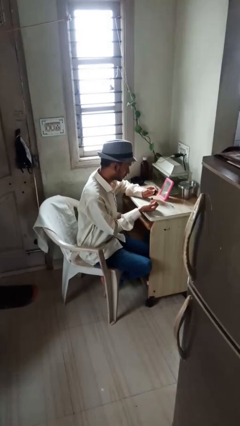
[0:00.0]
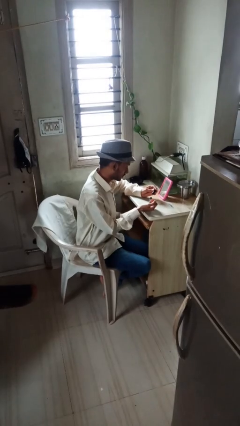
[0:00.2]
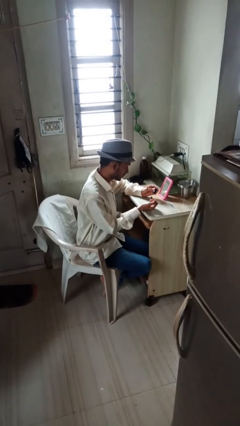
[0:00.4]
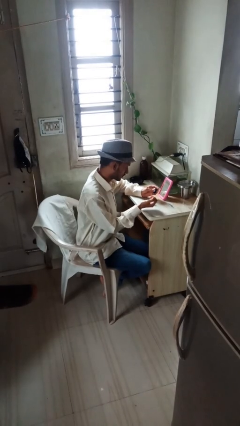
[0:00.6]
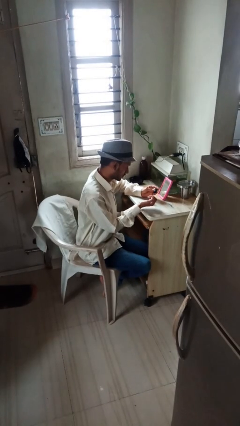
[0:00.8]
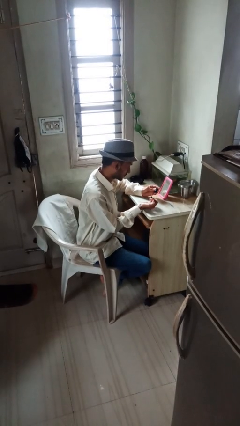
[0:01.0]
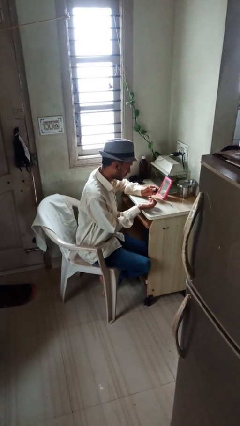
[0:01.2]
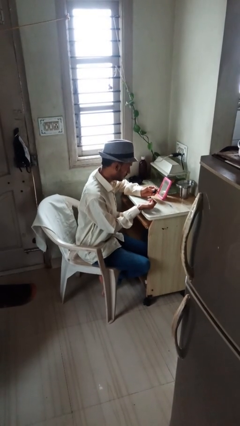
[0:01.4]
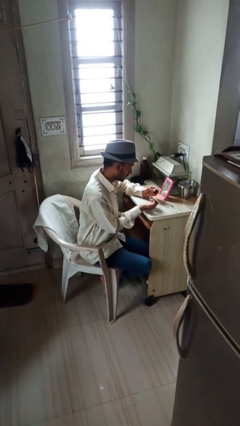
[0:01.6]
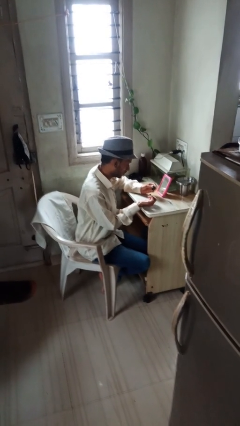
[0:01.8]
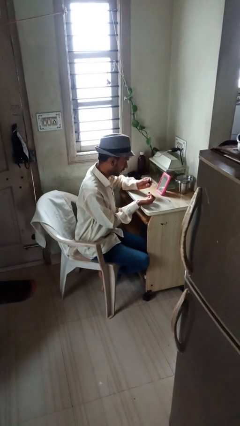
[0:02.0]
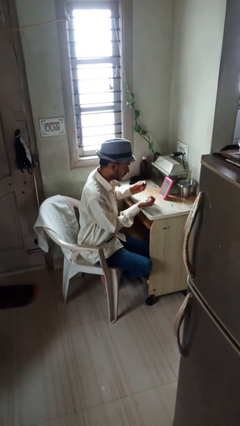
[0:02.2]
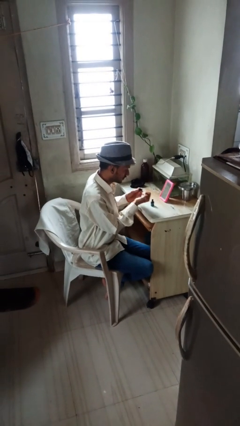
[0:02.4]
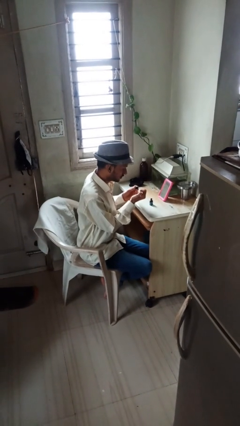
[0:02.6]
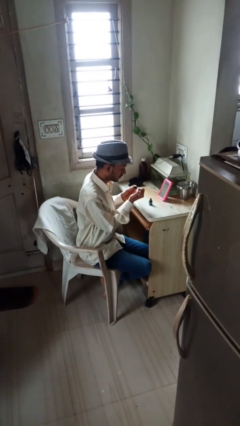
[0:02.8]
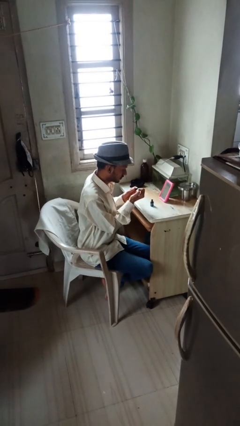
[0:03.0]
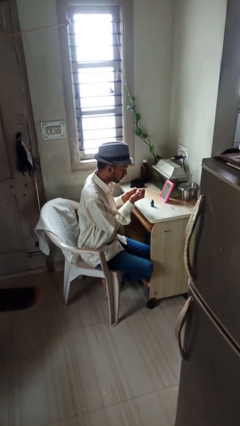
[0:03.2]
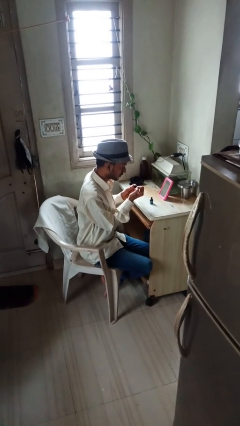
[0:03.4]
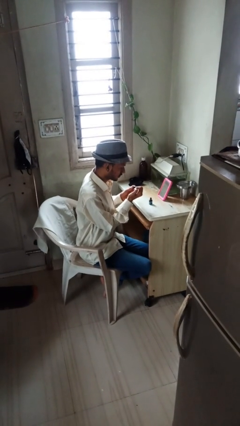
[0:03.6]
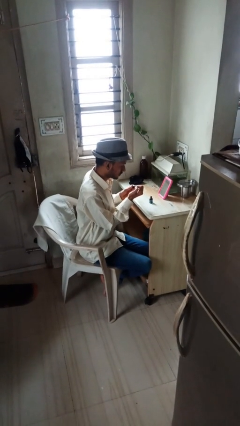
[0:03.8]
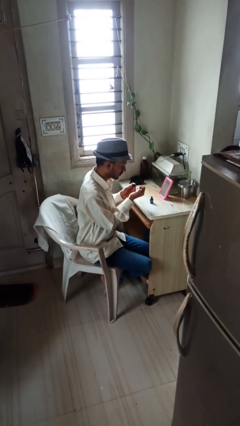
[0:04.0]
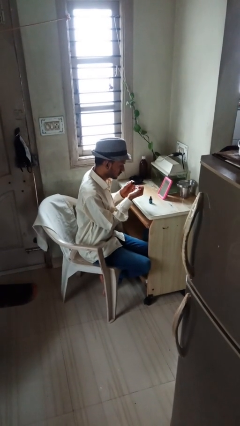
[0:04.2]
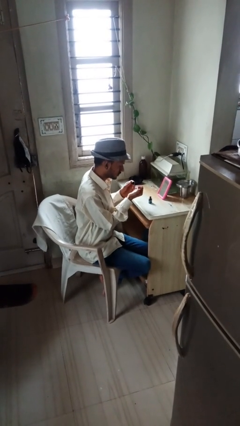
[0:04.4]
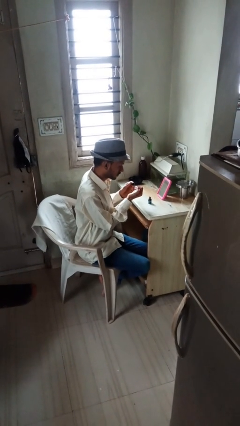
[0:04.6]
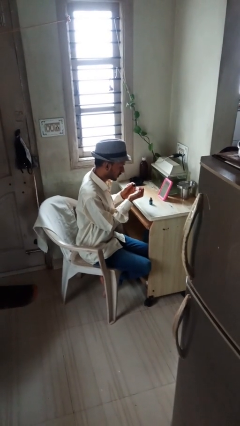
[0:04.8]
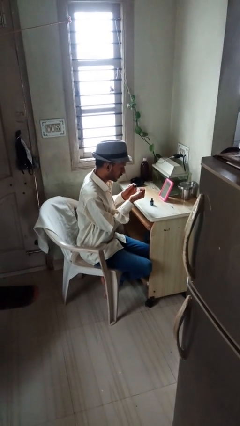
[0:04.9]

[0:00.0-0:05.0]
person paints fingernails

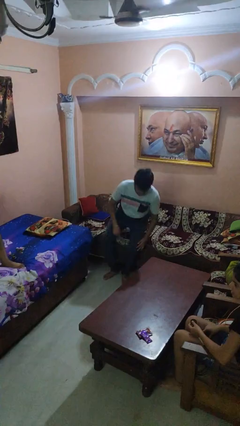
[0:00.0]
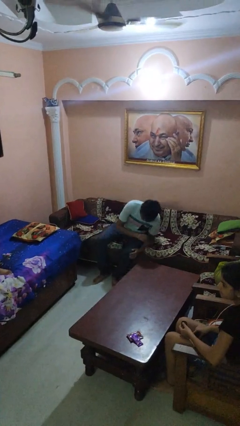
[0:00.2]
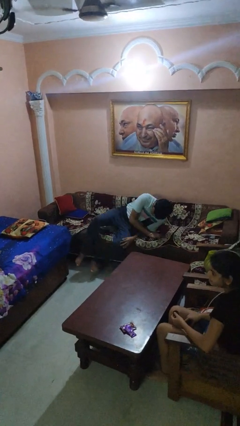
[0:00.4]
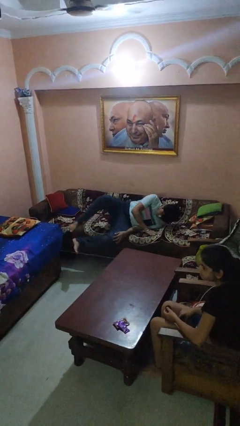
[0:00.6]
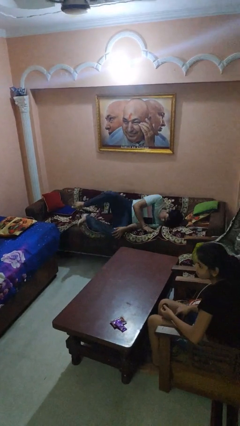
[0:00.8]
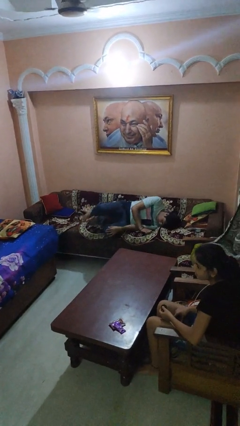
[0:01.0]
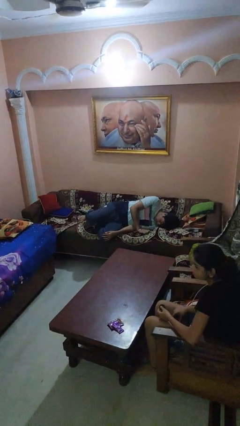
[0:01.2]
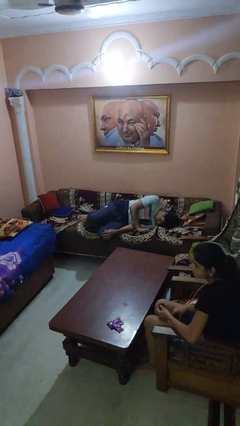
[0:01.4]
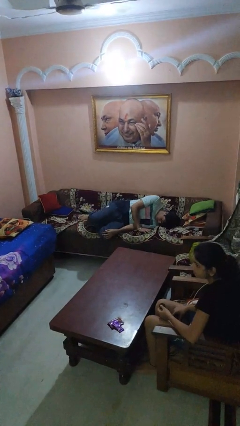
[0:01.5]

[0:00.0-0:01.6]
person lies down on couch

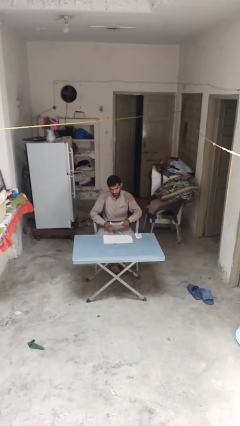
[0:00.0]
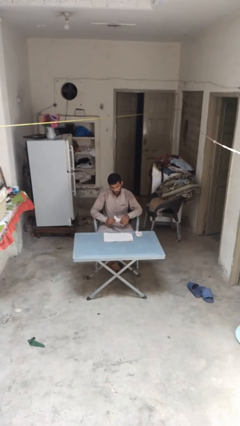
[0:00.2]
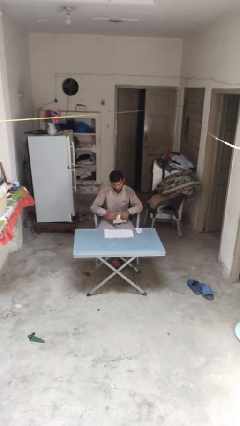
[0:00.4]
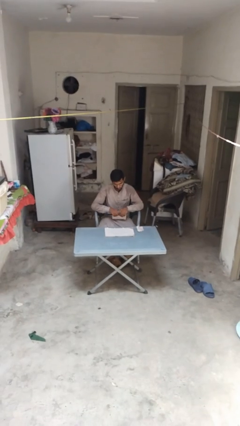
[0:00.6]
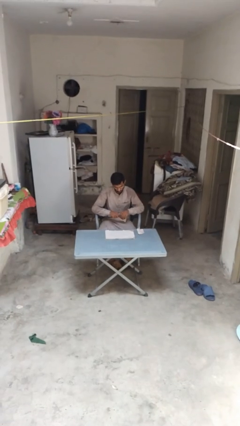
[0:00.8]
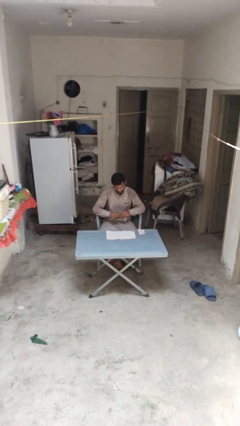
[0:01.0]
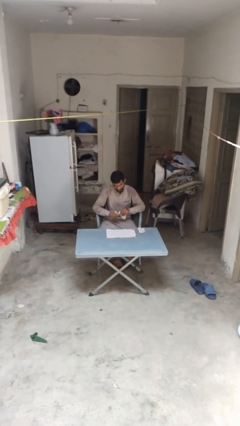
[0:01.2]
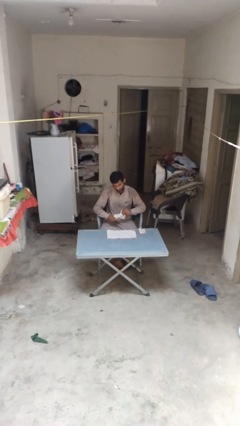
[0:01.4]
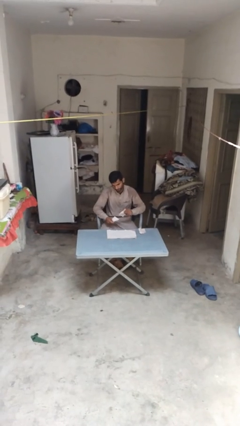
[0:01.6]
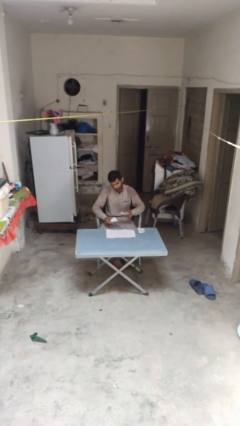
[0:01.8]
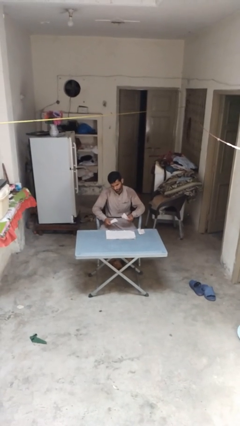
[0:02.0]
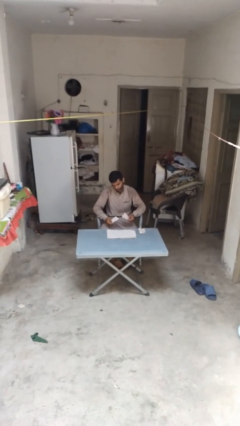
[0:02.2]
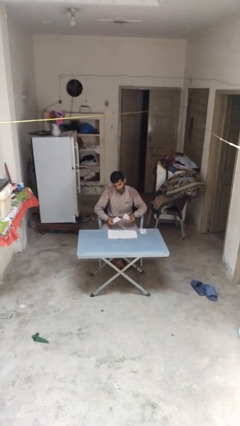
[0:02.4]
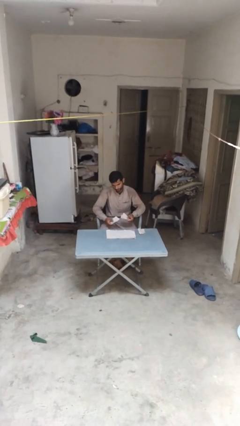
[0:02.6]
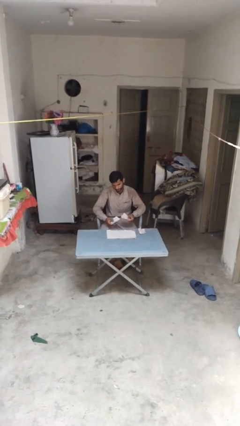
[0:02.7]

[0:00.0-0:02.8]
person tears paper

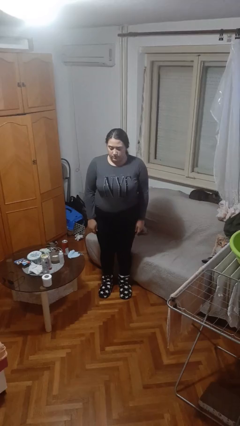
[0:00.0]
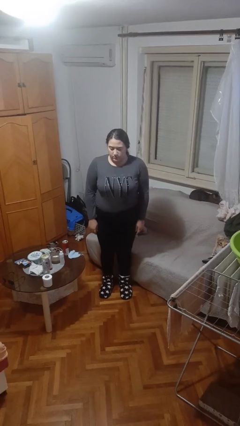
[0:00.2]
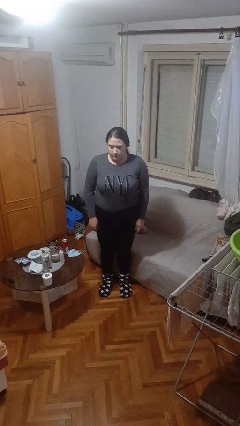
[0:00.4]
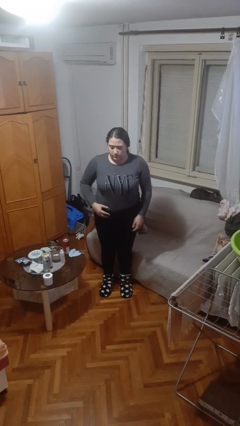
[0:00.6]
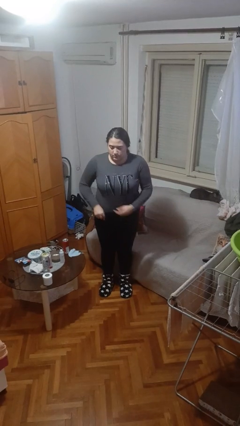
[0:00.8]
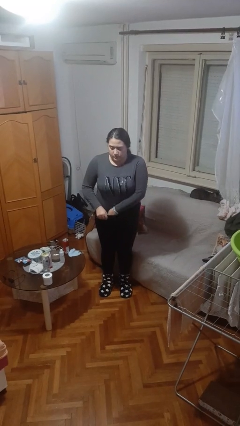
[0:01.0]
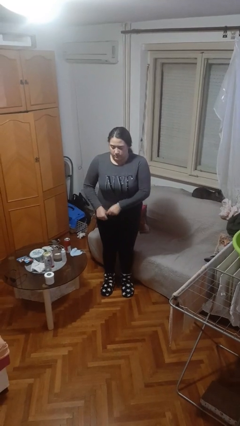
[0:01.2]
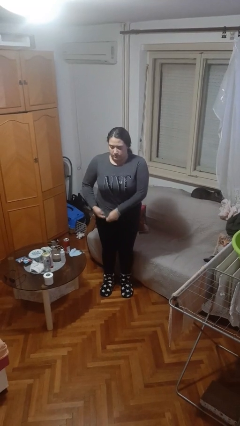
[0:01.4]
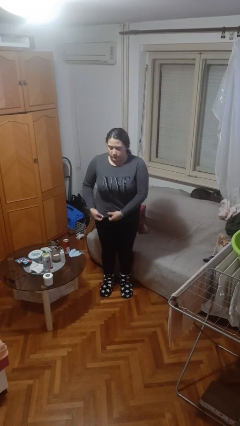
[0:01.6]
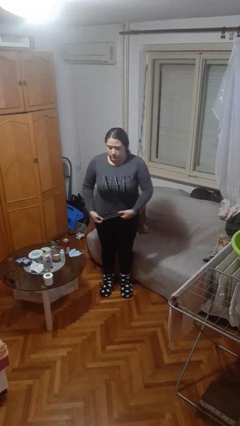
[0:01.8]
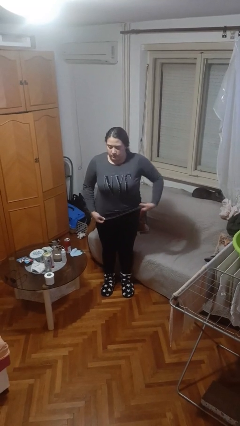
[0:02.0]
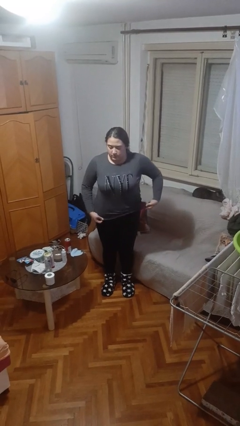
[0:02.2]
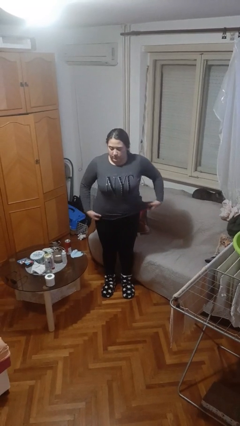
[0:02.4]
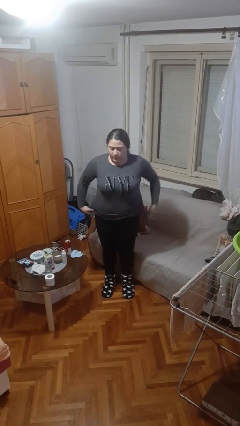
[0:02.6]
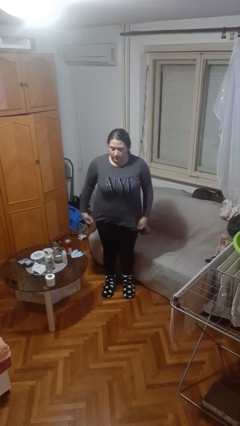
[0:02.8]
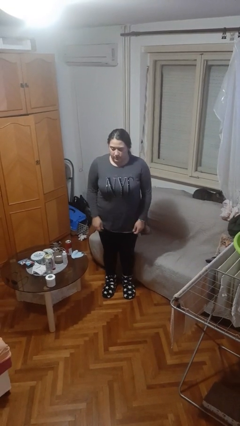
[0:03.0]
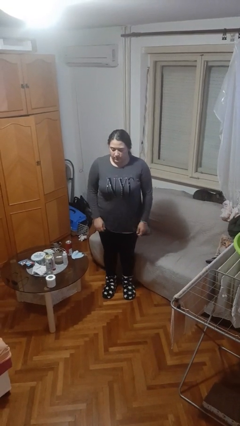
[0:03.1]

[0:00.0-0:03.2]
person untucks shirt

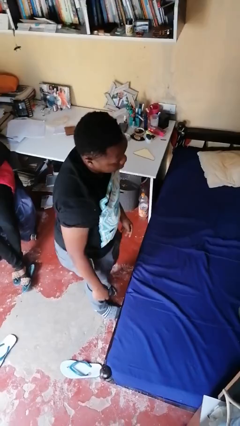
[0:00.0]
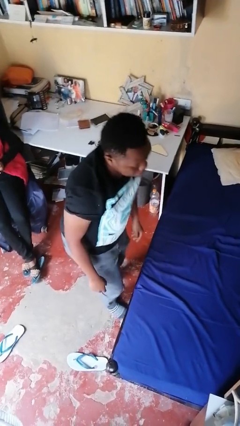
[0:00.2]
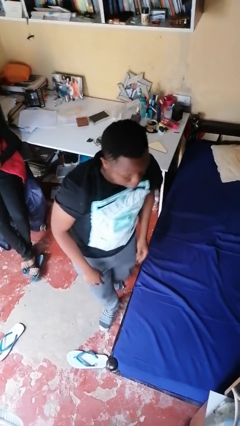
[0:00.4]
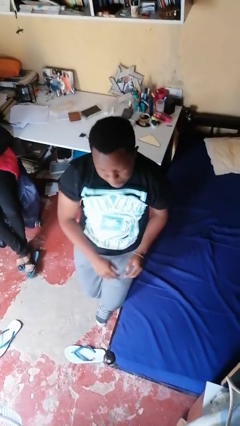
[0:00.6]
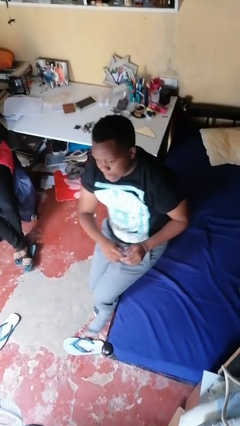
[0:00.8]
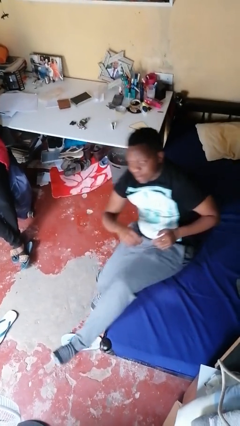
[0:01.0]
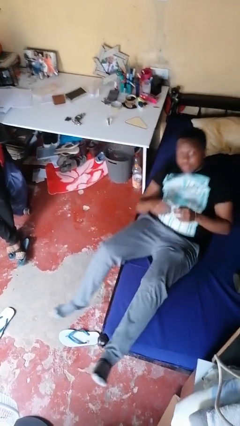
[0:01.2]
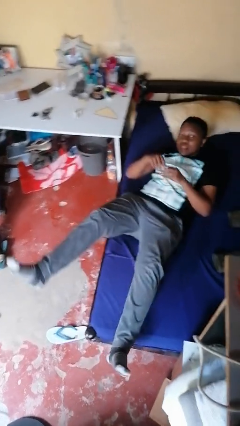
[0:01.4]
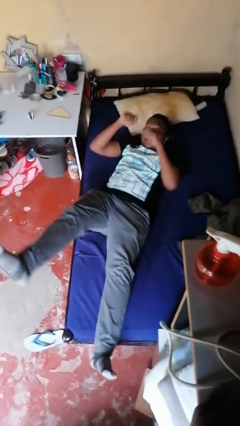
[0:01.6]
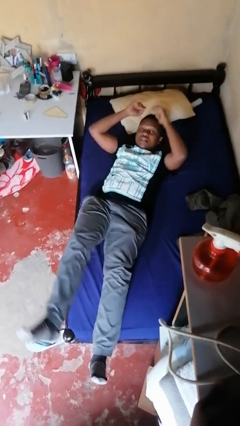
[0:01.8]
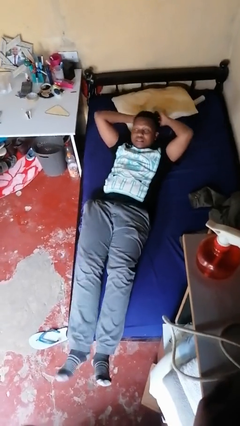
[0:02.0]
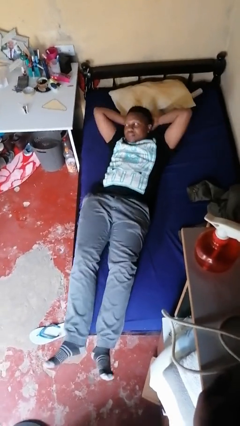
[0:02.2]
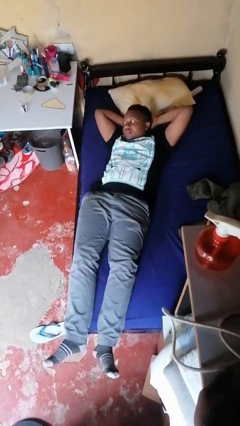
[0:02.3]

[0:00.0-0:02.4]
person lies down on bed

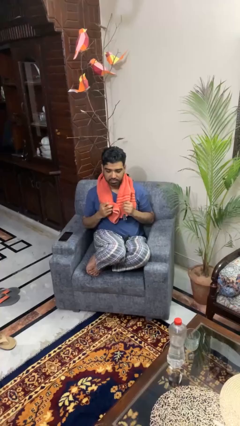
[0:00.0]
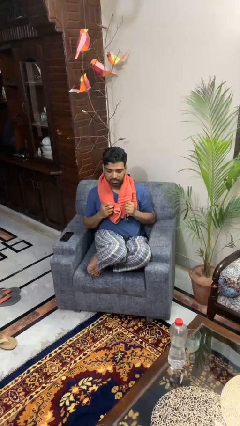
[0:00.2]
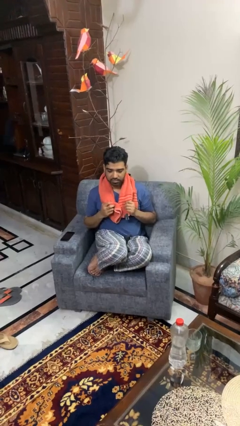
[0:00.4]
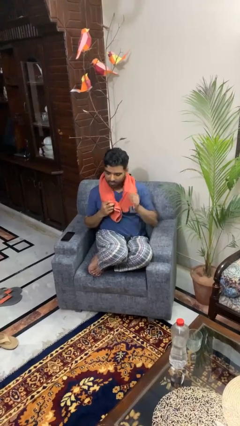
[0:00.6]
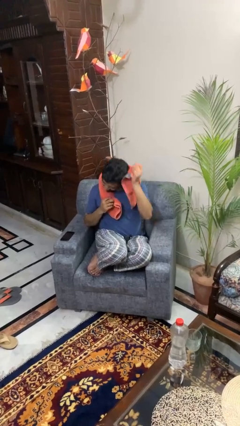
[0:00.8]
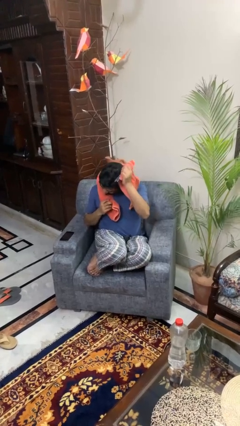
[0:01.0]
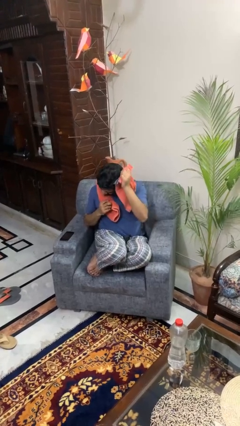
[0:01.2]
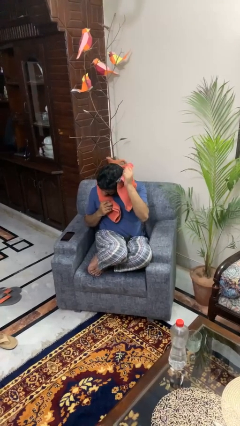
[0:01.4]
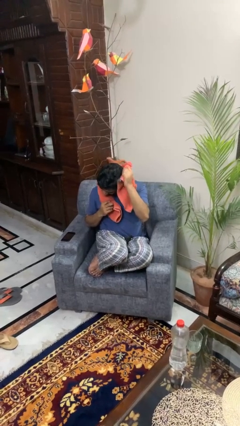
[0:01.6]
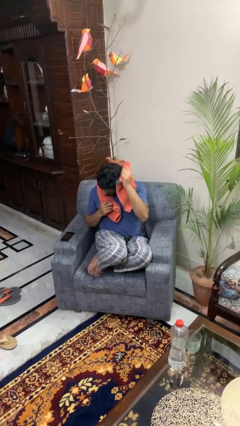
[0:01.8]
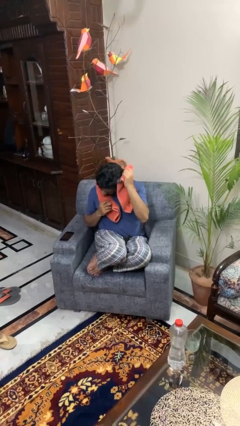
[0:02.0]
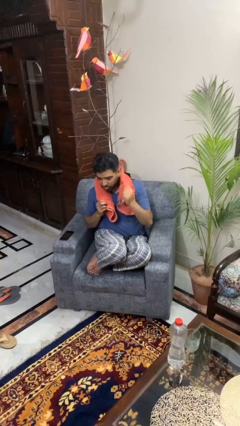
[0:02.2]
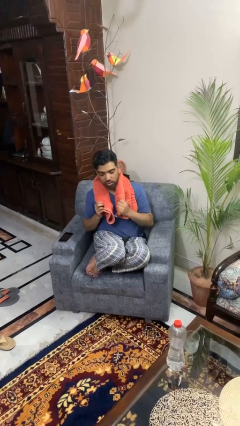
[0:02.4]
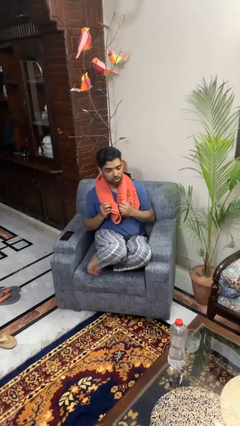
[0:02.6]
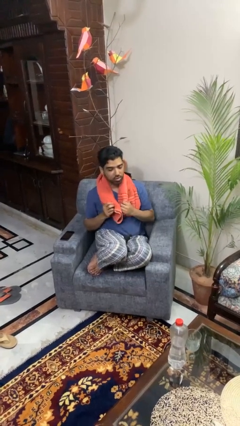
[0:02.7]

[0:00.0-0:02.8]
person dries hair with towel
